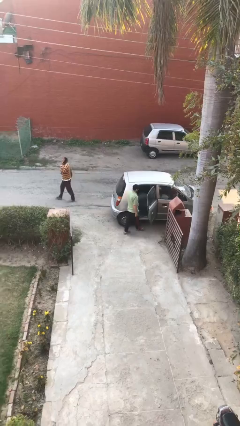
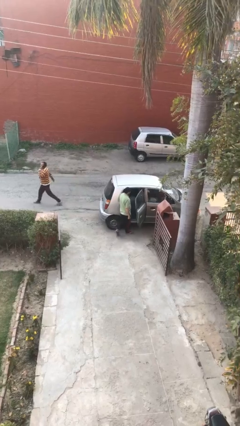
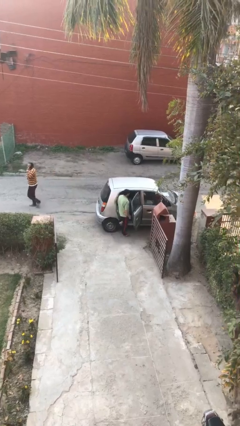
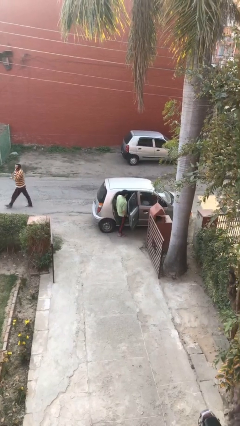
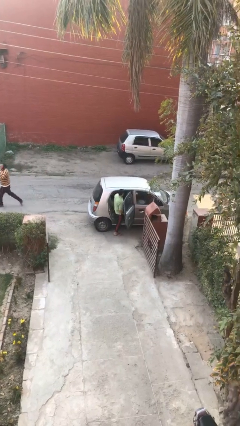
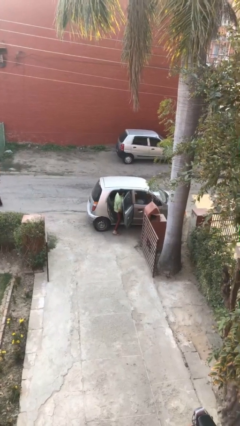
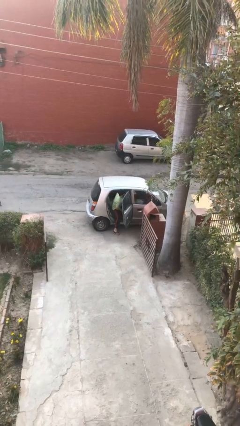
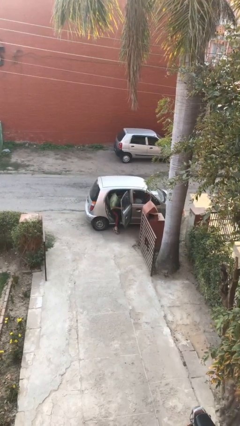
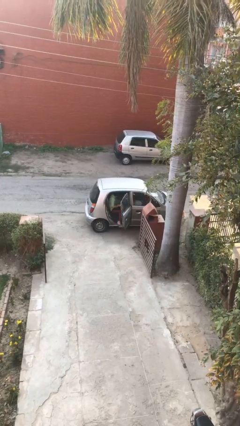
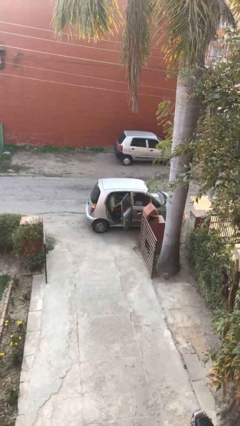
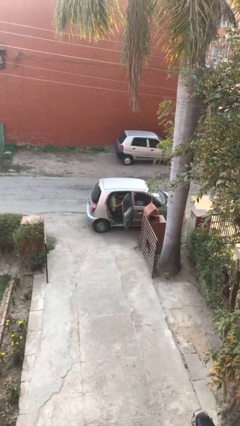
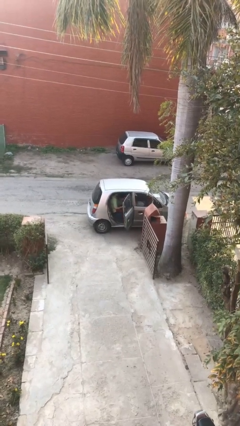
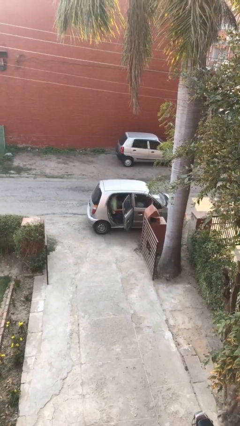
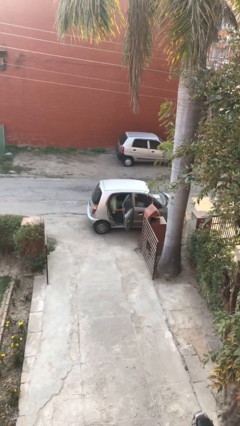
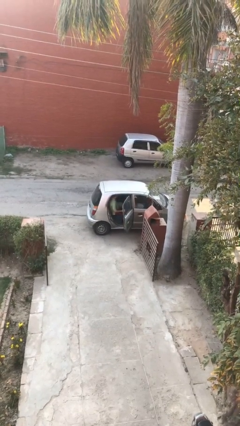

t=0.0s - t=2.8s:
person enters car

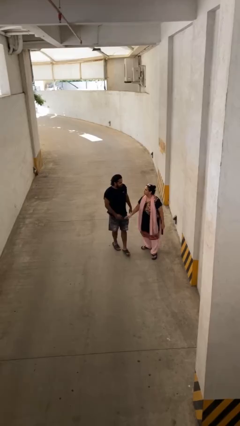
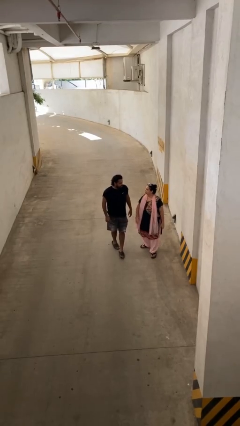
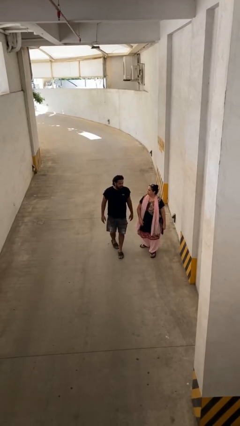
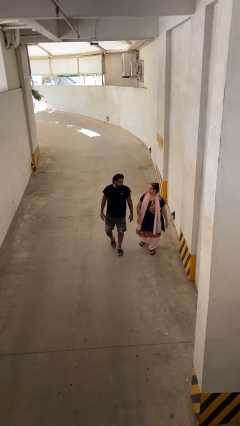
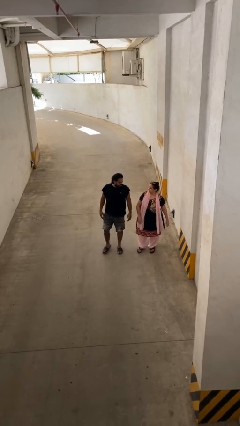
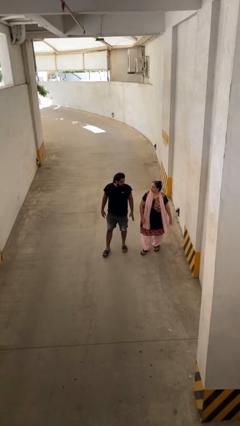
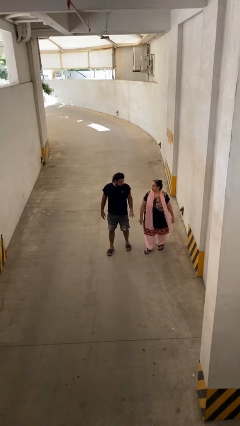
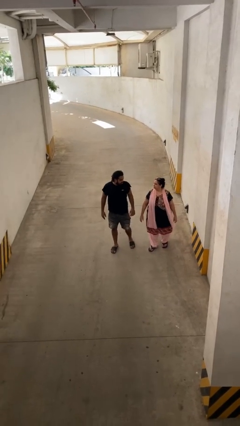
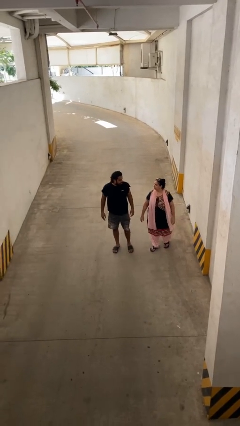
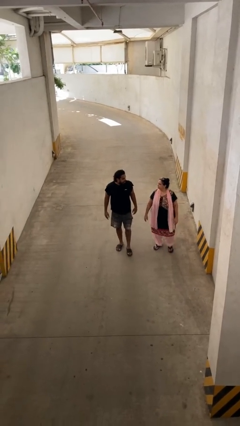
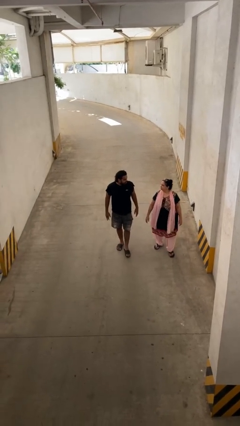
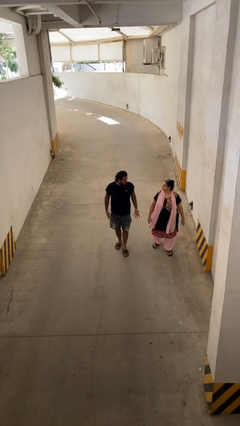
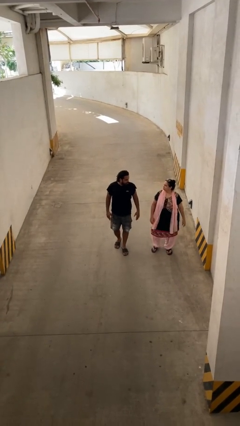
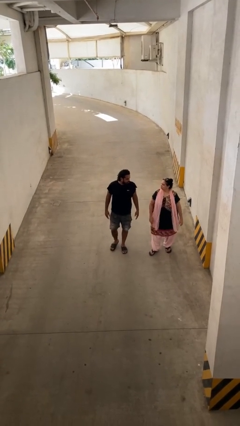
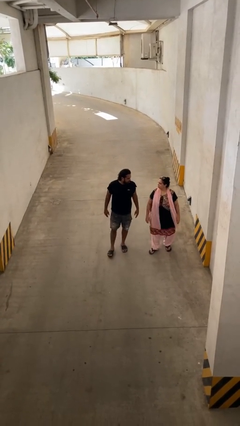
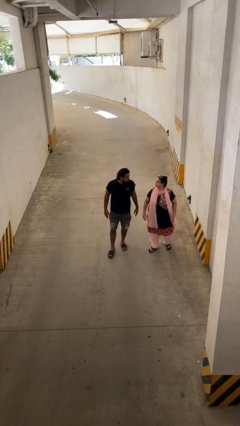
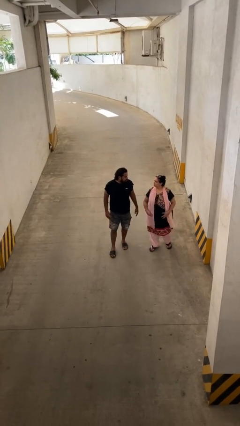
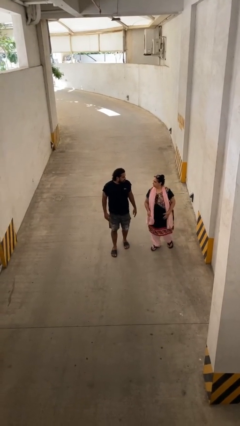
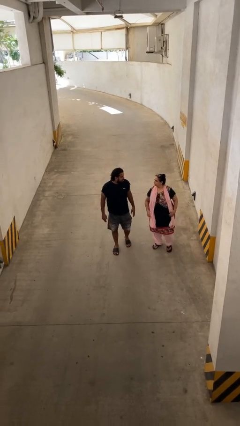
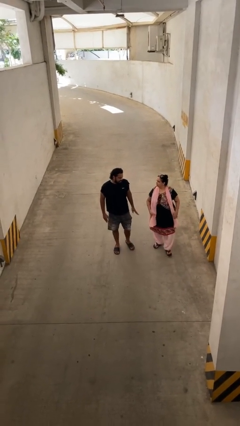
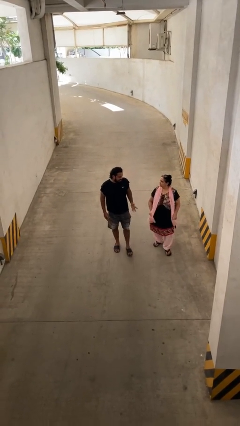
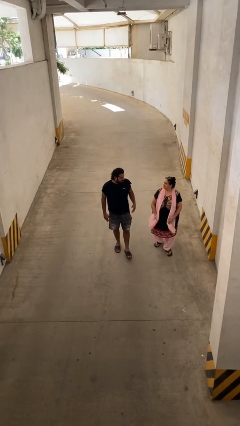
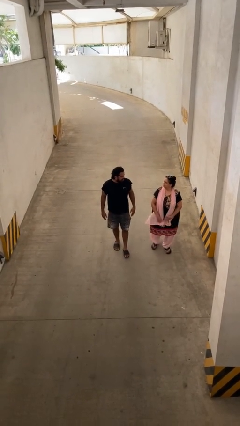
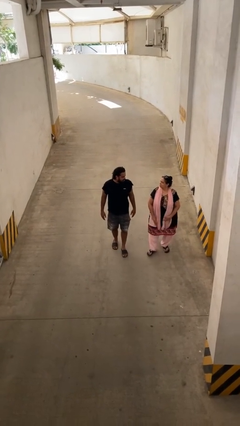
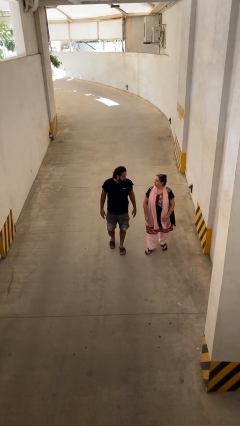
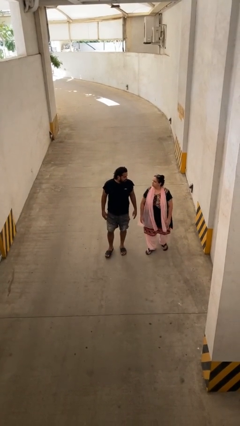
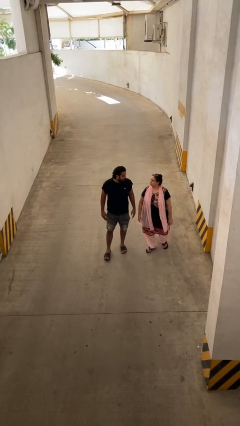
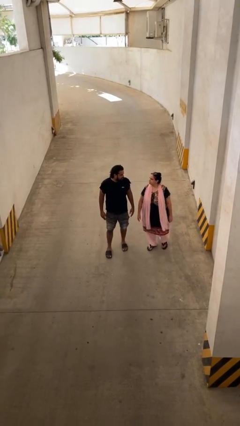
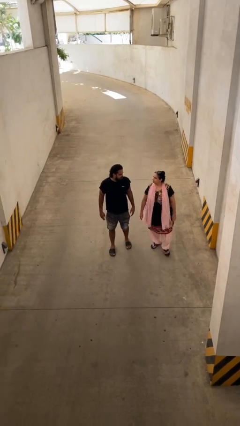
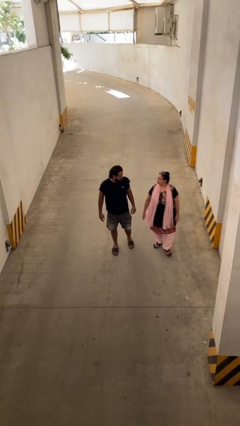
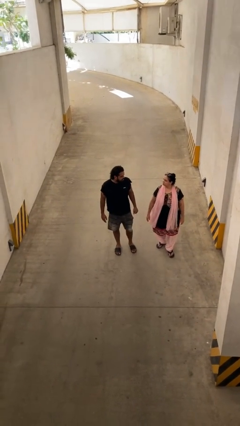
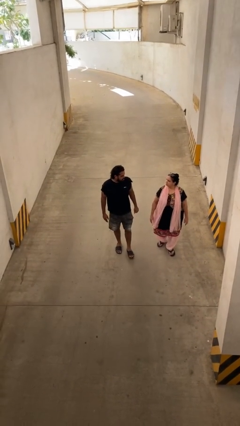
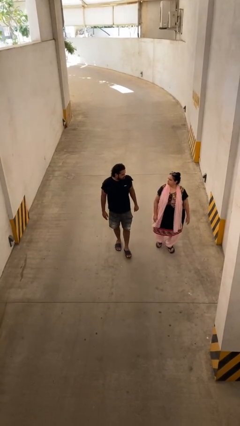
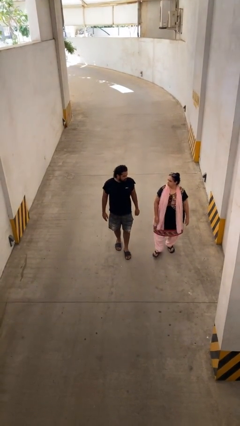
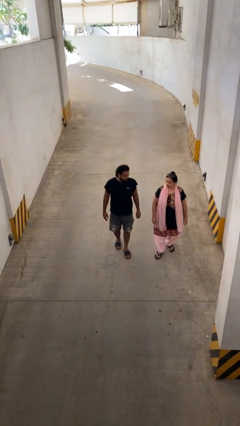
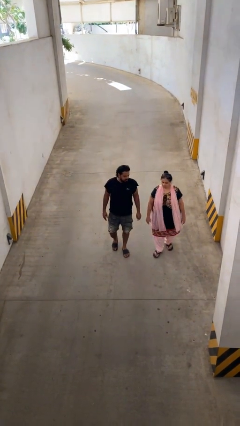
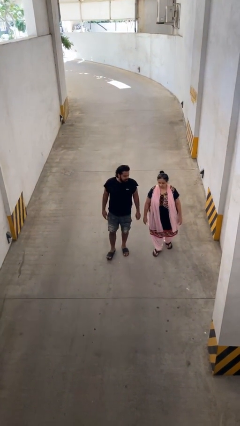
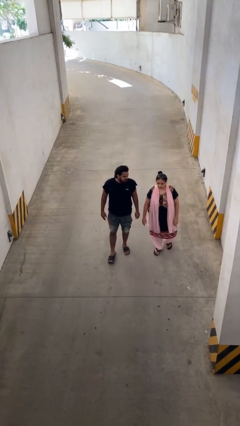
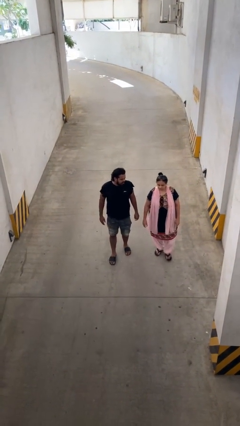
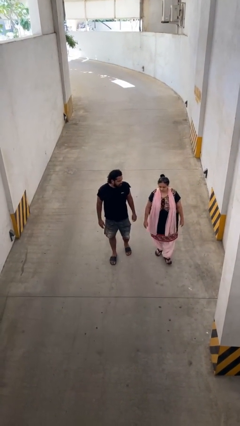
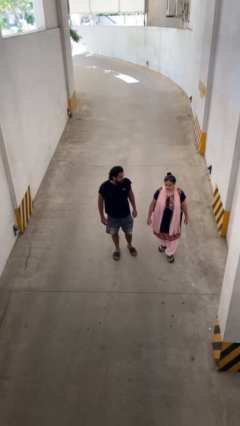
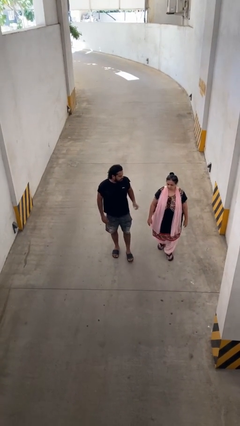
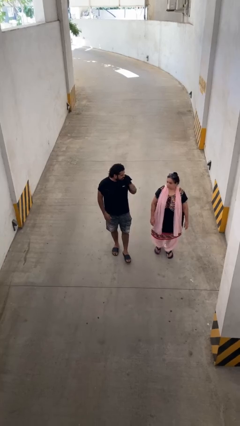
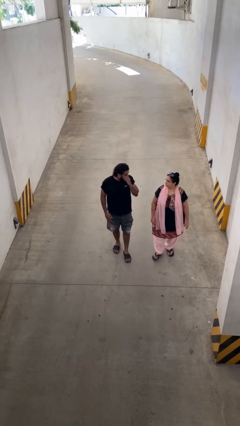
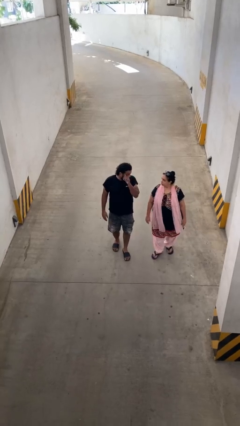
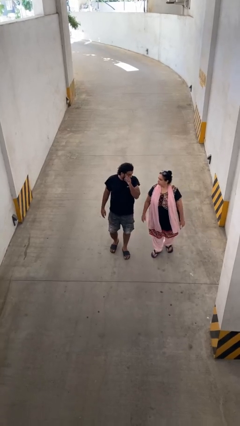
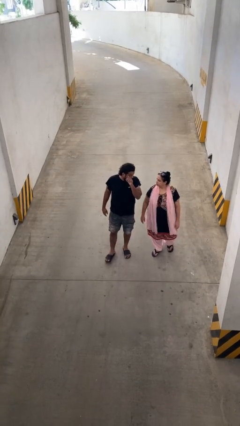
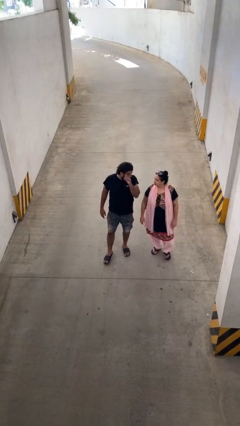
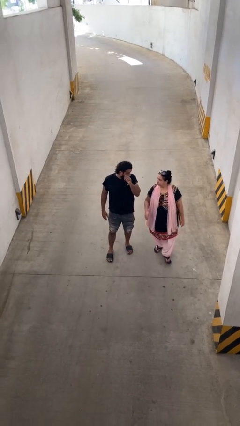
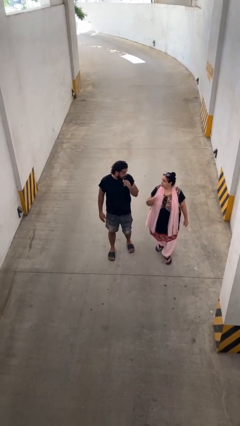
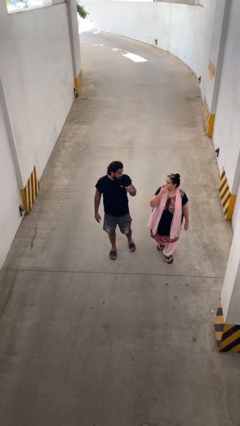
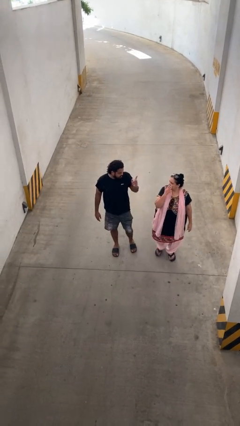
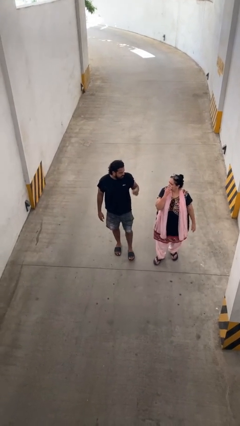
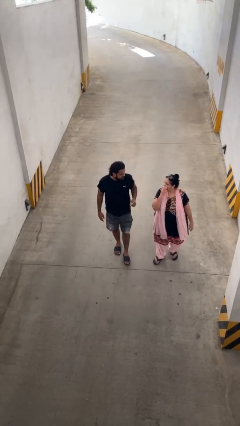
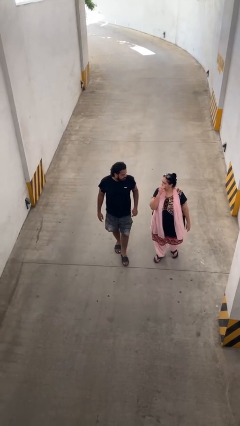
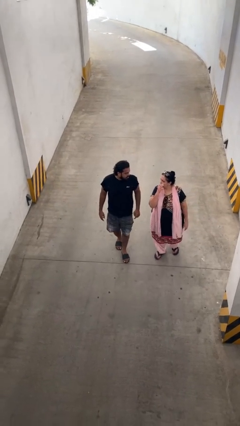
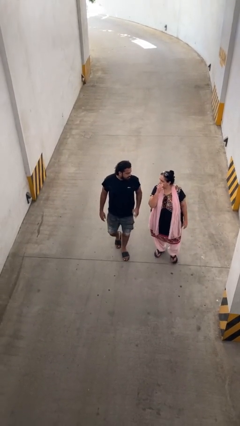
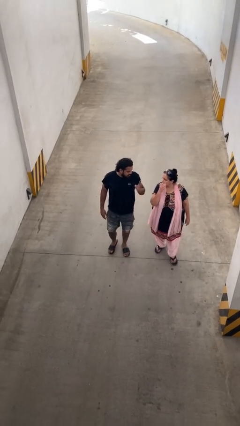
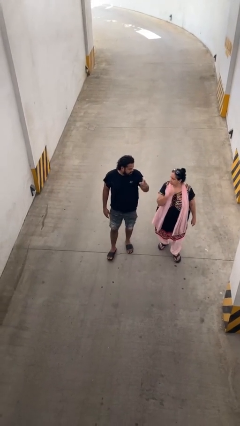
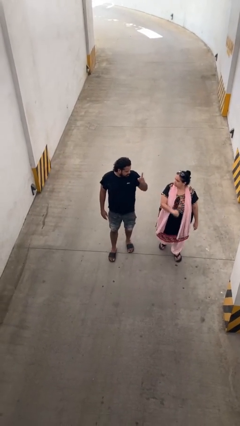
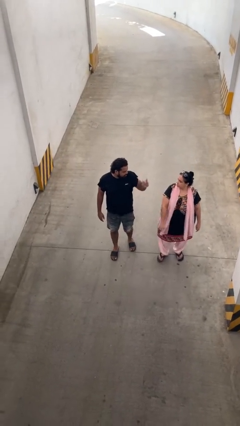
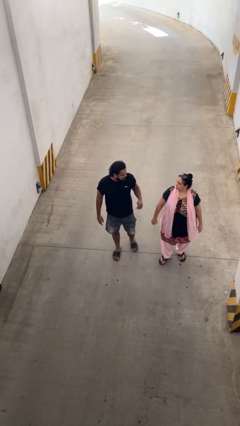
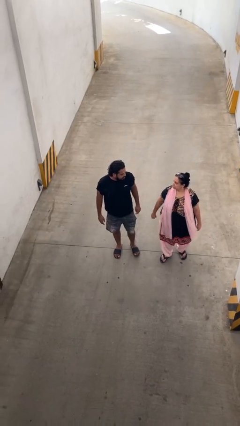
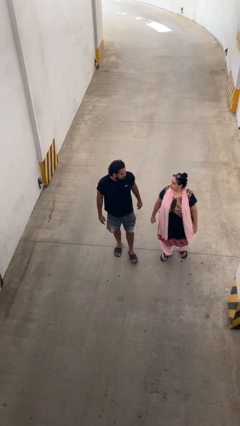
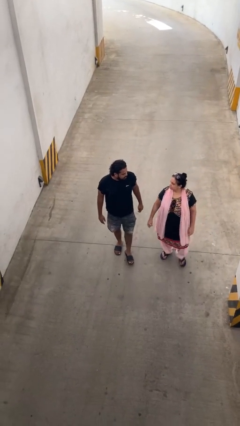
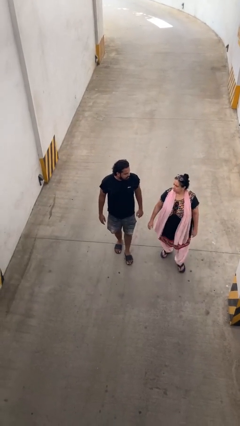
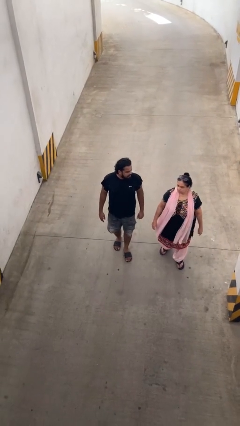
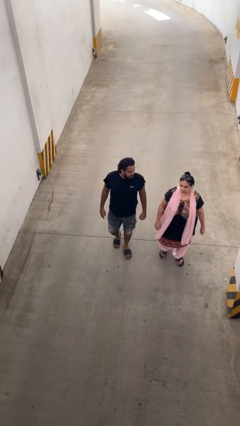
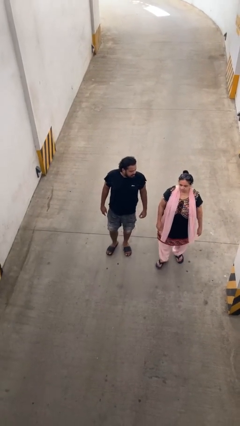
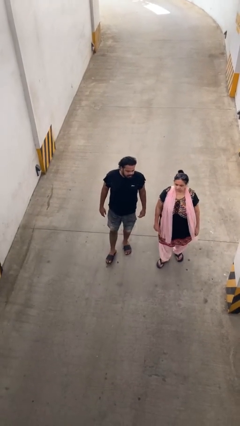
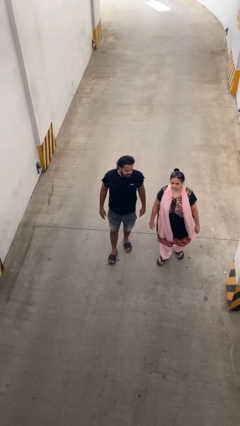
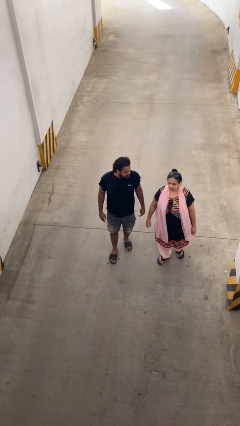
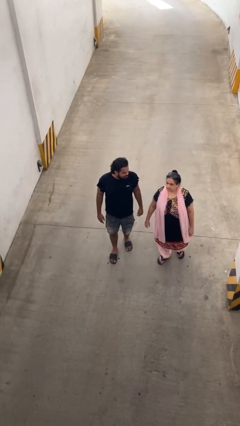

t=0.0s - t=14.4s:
person talks to person

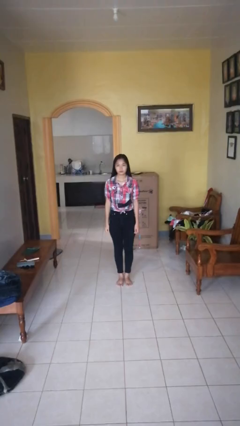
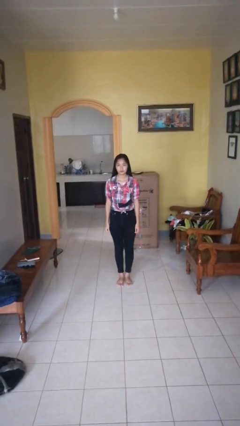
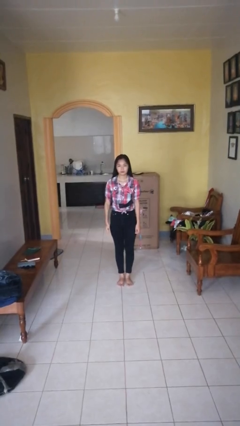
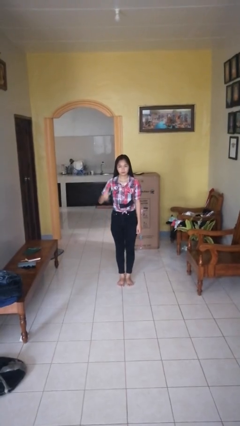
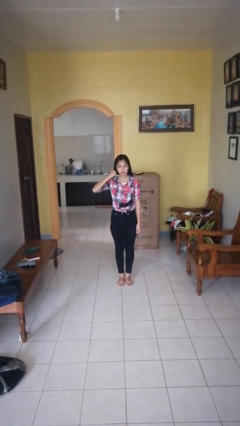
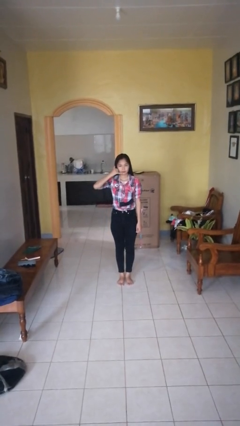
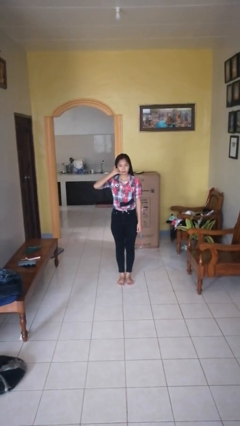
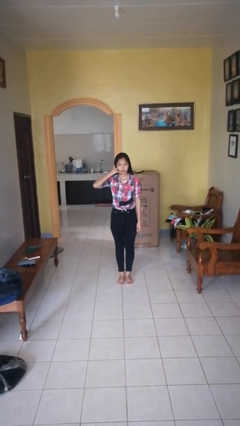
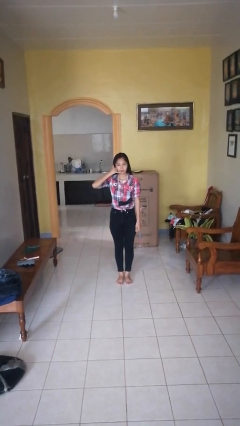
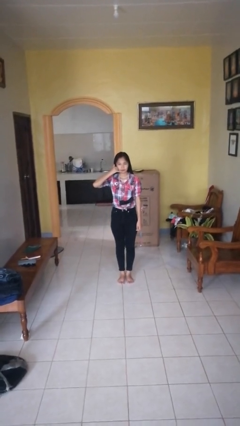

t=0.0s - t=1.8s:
person gestures call me
